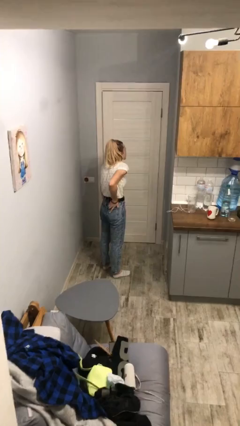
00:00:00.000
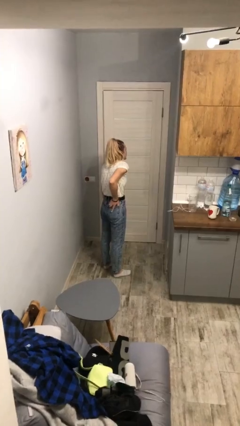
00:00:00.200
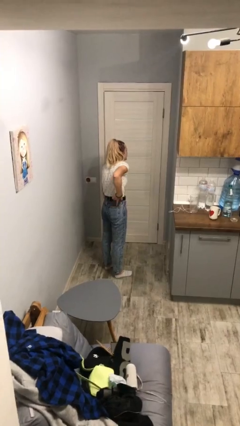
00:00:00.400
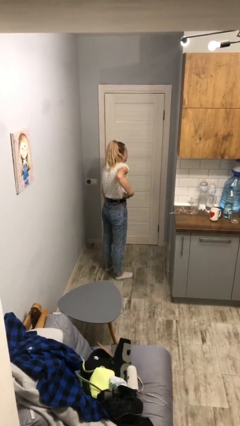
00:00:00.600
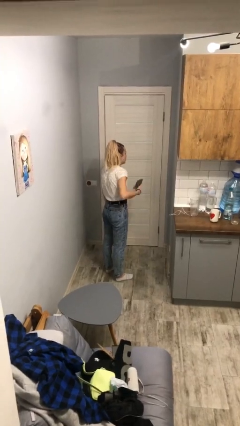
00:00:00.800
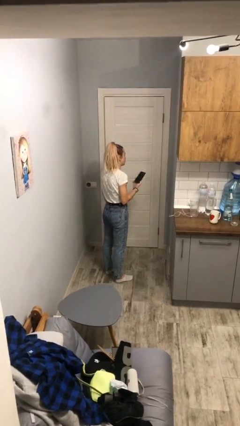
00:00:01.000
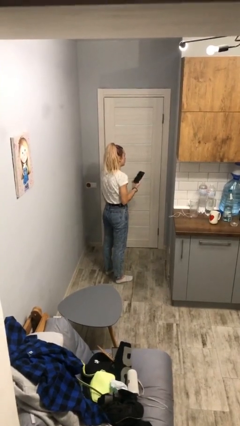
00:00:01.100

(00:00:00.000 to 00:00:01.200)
person takes phone from pocket

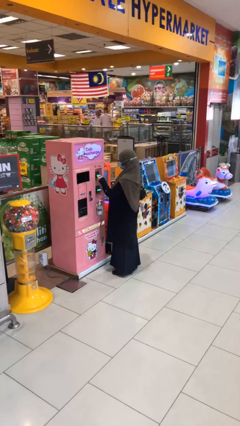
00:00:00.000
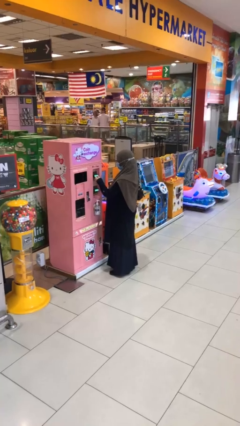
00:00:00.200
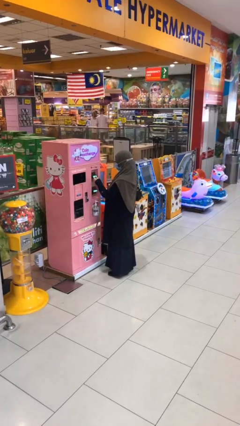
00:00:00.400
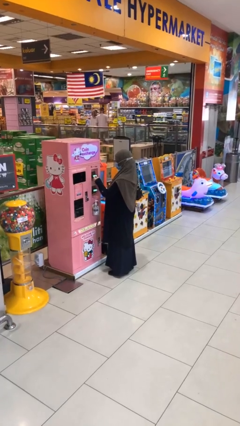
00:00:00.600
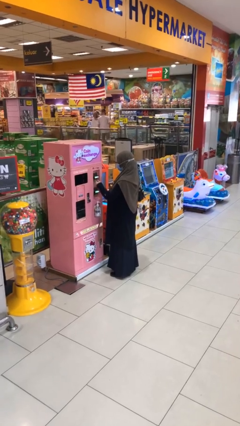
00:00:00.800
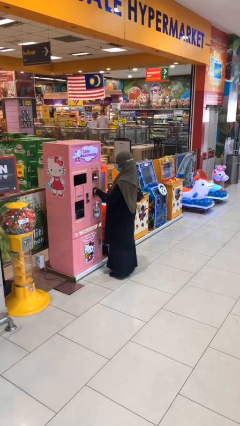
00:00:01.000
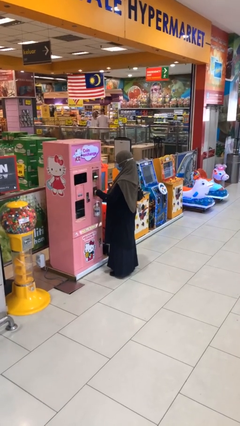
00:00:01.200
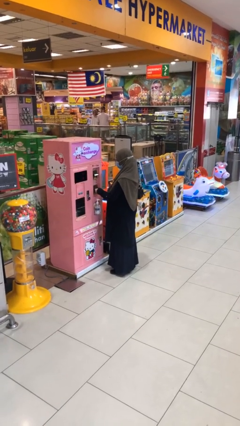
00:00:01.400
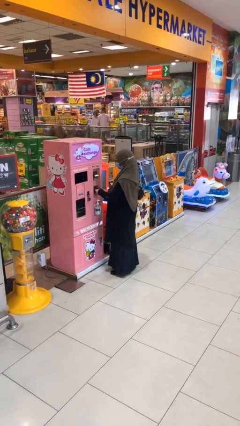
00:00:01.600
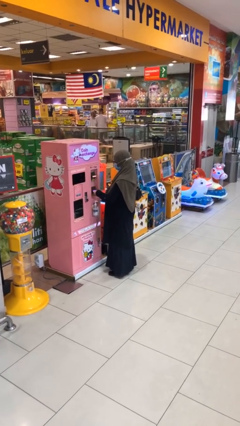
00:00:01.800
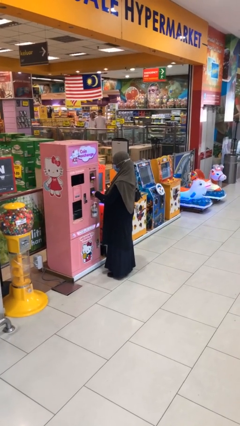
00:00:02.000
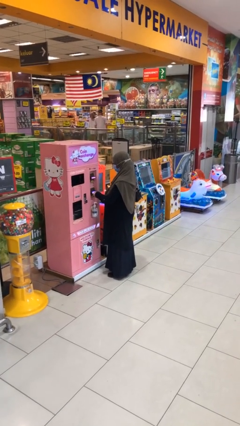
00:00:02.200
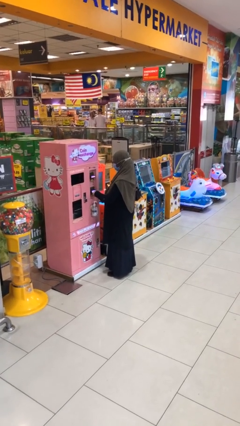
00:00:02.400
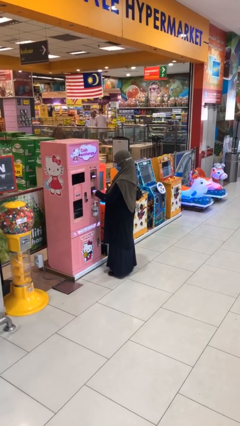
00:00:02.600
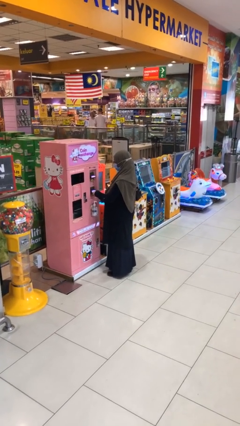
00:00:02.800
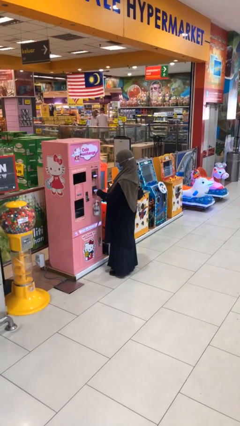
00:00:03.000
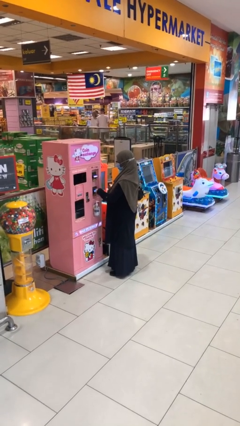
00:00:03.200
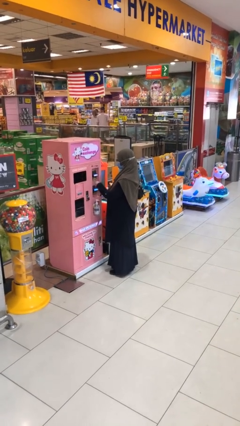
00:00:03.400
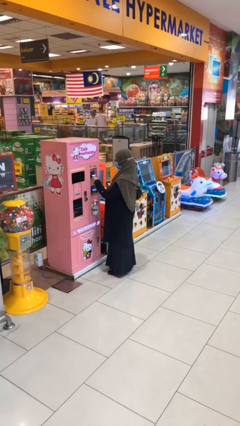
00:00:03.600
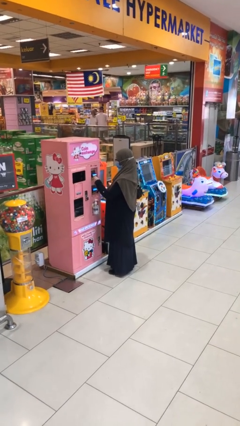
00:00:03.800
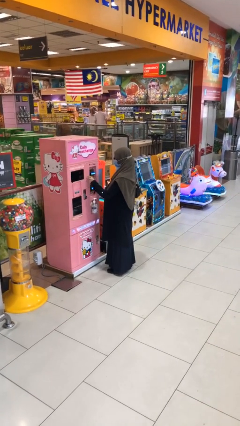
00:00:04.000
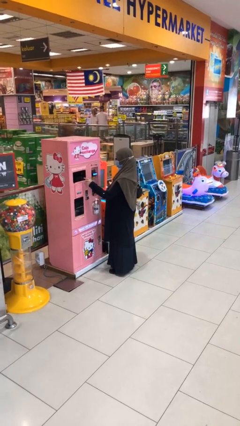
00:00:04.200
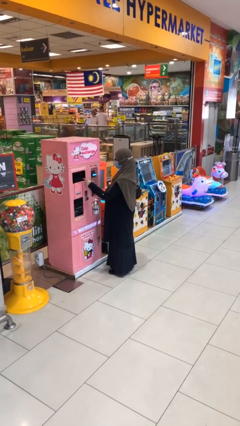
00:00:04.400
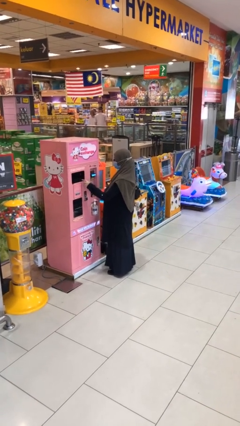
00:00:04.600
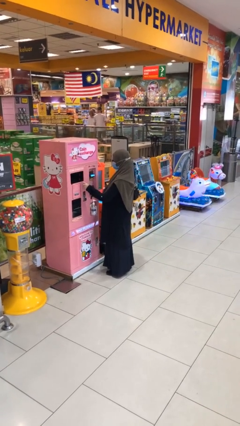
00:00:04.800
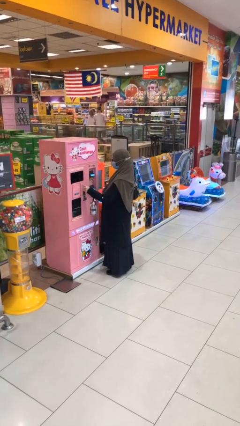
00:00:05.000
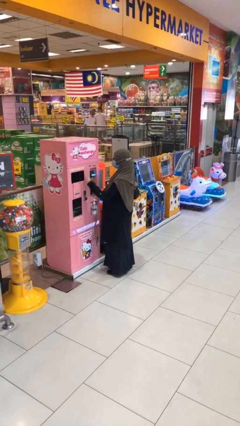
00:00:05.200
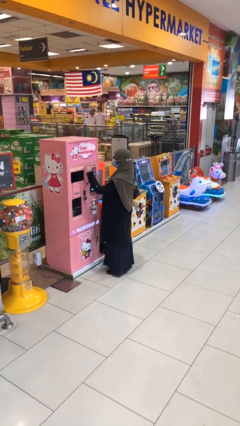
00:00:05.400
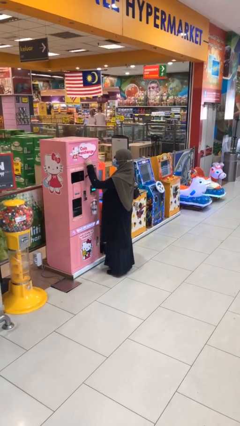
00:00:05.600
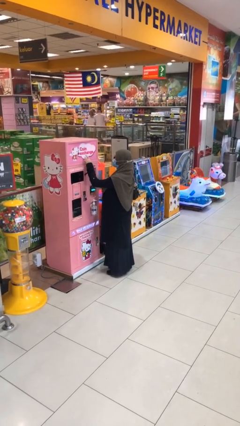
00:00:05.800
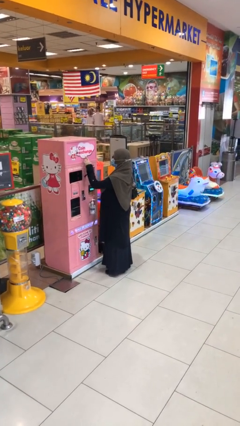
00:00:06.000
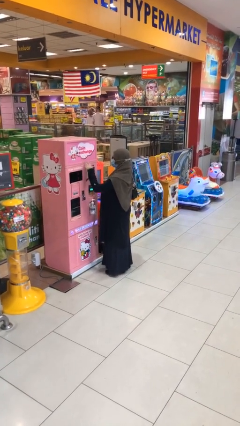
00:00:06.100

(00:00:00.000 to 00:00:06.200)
person purchases from machine

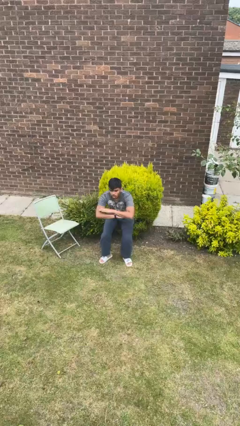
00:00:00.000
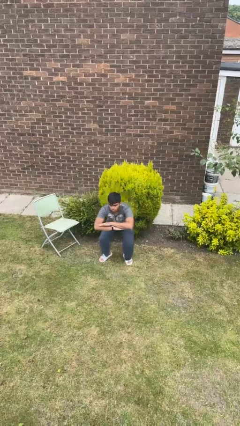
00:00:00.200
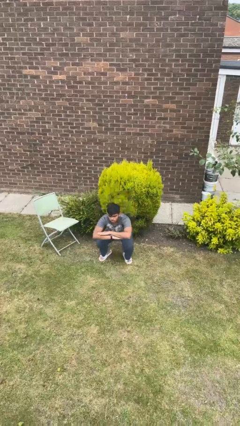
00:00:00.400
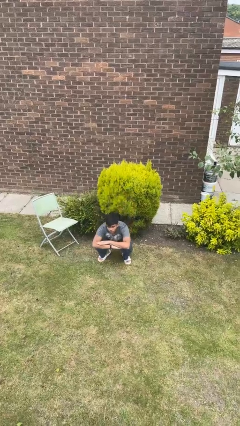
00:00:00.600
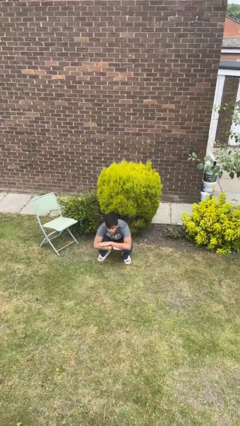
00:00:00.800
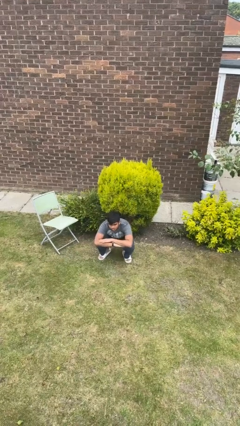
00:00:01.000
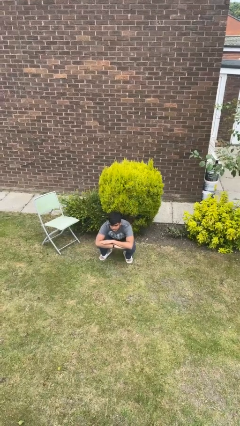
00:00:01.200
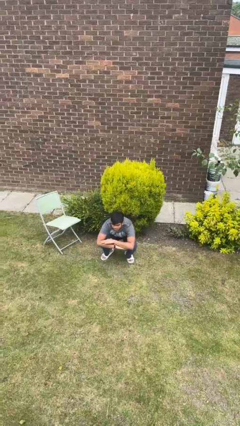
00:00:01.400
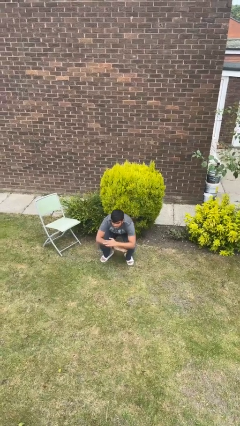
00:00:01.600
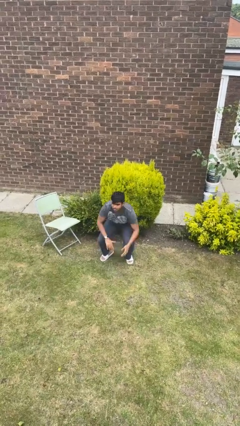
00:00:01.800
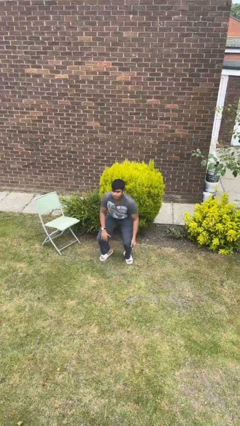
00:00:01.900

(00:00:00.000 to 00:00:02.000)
person squats

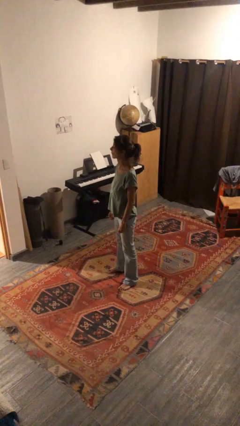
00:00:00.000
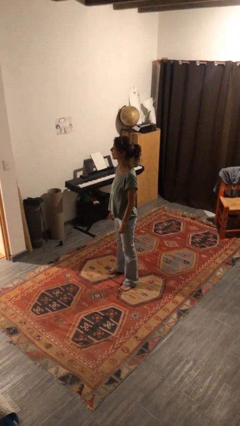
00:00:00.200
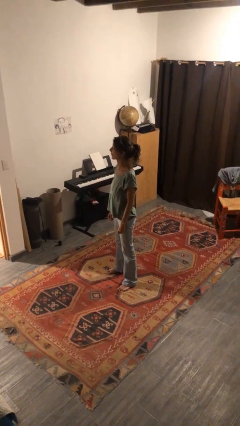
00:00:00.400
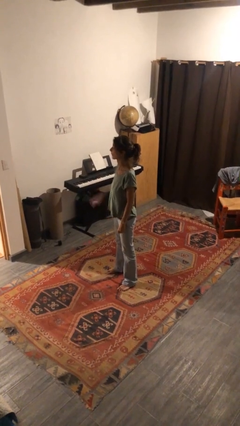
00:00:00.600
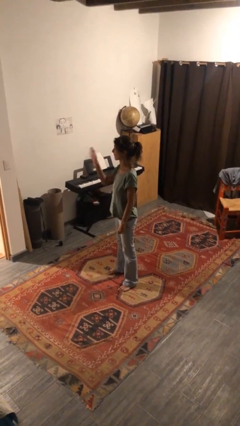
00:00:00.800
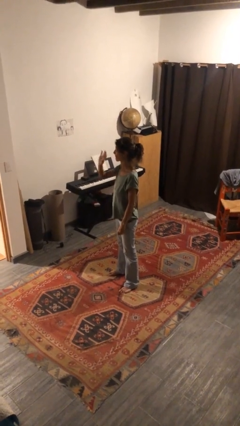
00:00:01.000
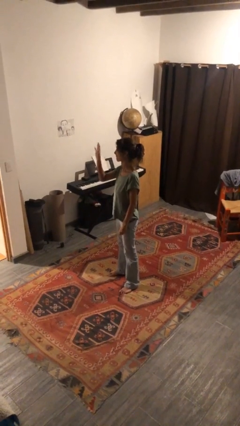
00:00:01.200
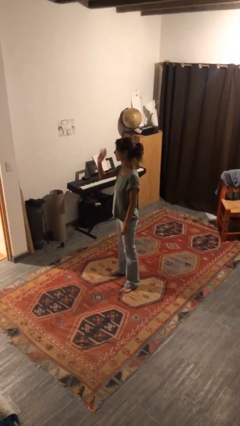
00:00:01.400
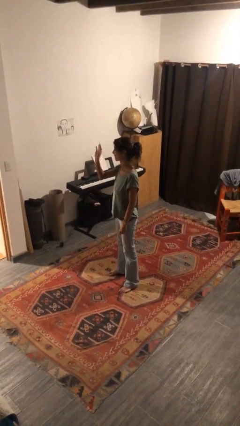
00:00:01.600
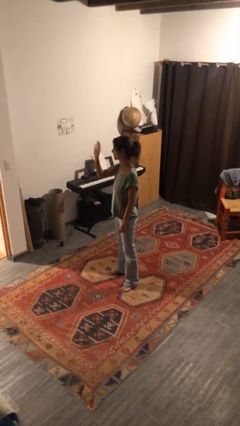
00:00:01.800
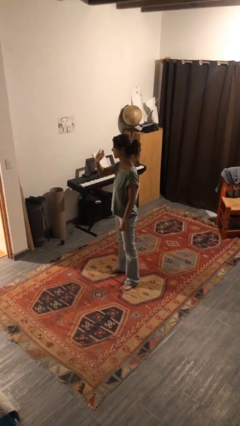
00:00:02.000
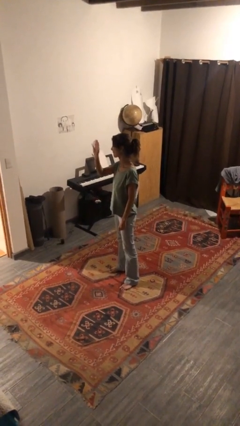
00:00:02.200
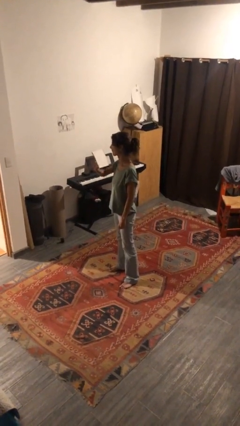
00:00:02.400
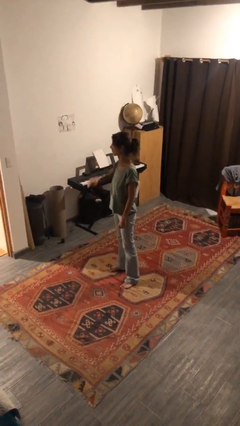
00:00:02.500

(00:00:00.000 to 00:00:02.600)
person waves at person

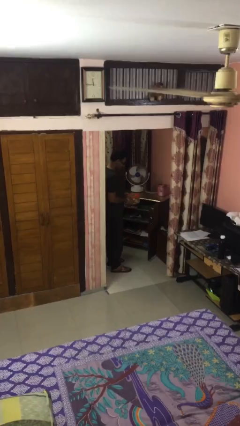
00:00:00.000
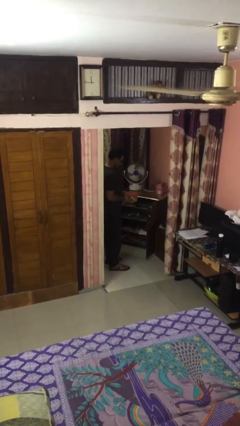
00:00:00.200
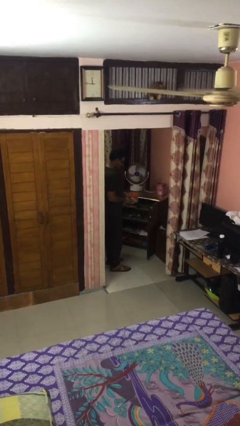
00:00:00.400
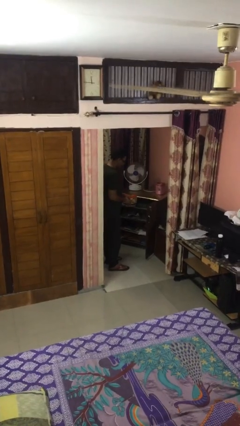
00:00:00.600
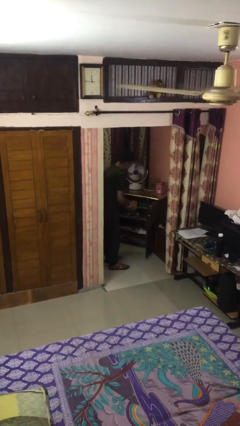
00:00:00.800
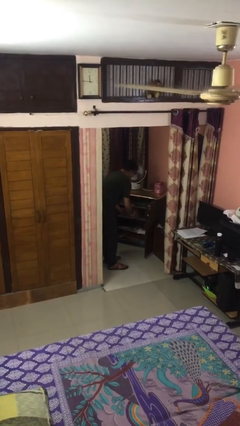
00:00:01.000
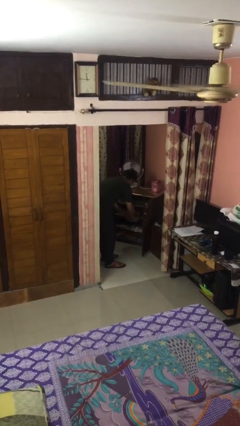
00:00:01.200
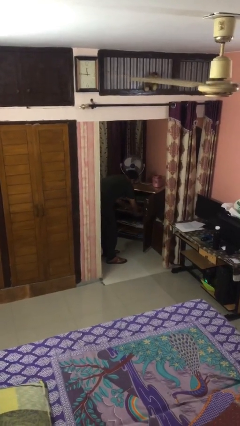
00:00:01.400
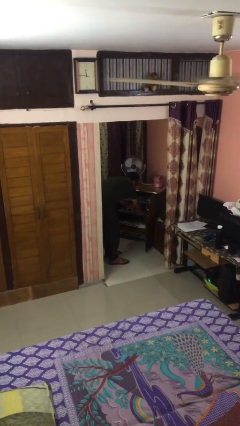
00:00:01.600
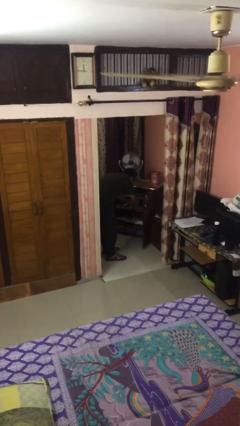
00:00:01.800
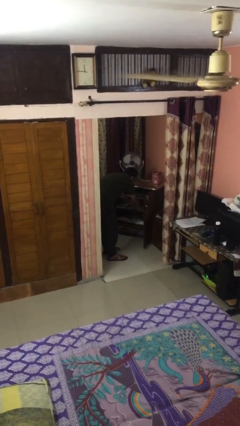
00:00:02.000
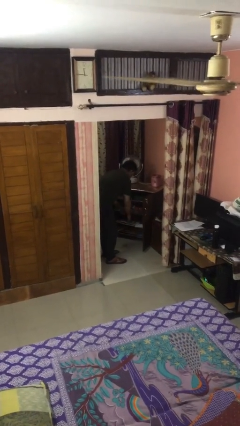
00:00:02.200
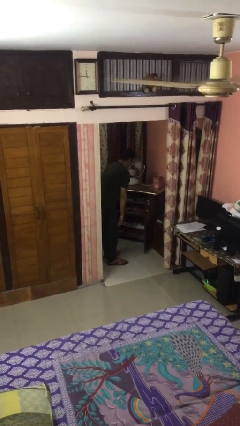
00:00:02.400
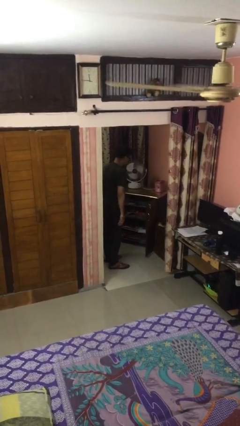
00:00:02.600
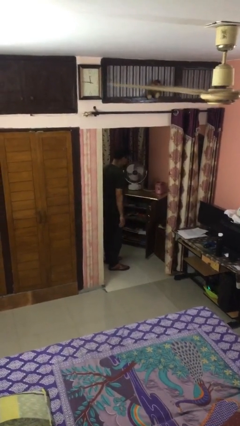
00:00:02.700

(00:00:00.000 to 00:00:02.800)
person puts down object into cabinet

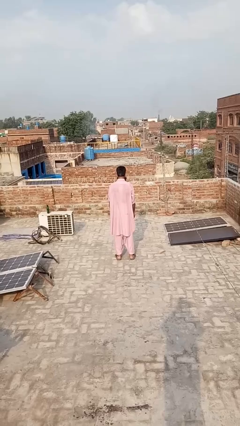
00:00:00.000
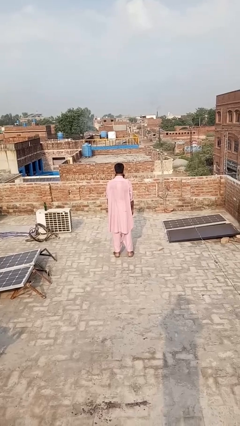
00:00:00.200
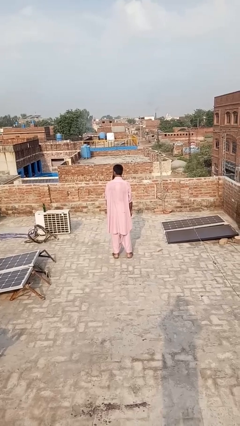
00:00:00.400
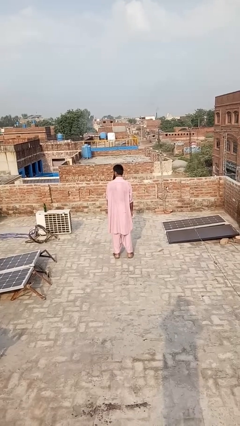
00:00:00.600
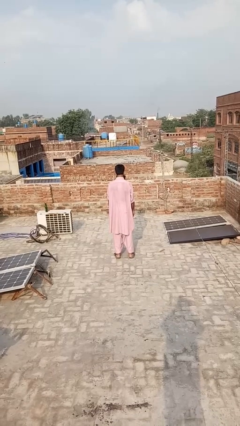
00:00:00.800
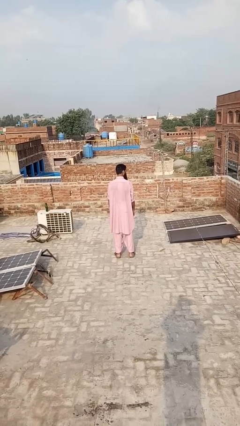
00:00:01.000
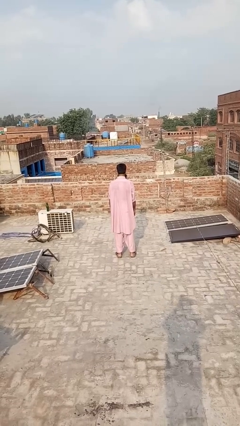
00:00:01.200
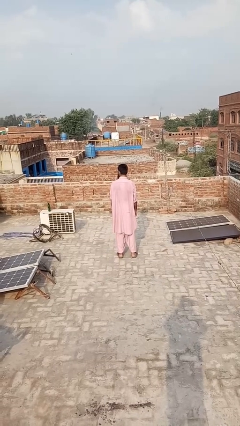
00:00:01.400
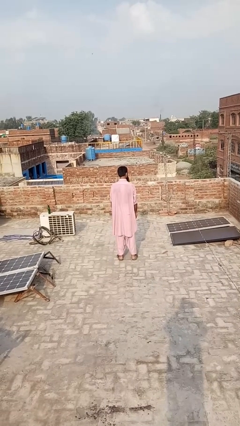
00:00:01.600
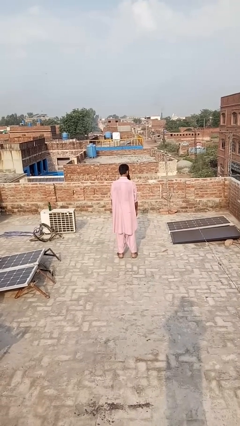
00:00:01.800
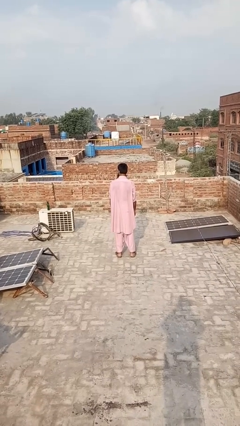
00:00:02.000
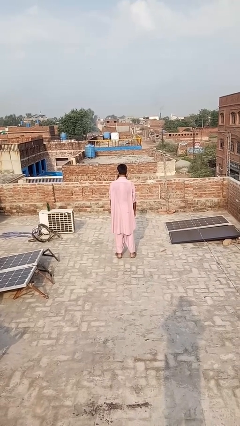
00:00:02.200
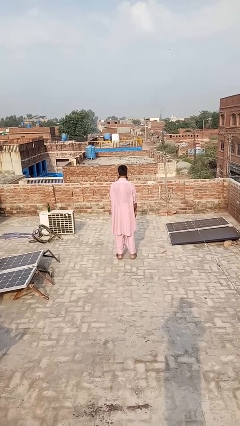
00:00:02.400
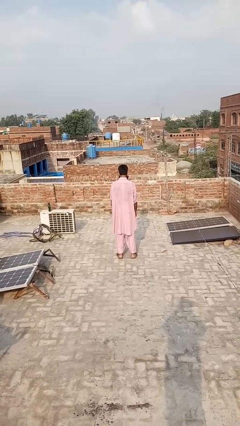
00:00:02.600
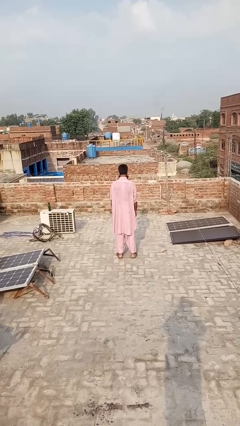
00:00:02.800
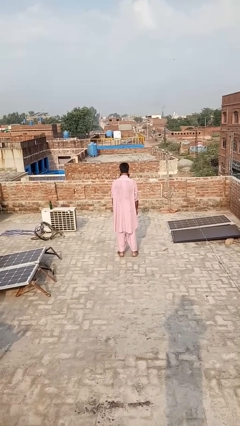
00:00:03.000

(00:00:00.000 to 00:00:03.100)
person shakes head
